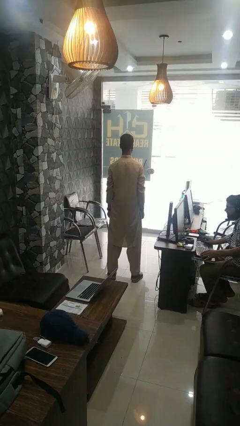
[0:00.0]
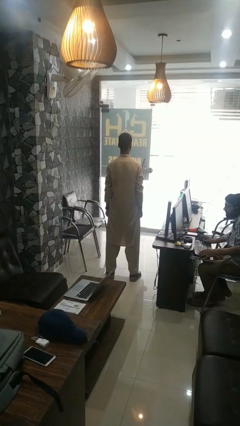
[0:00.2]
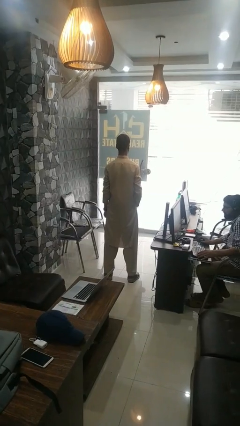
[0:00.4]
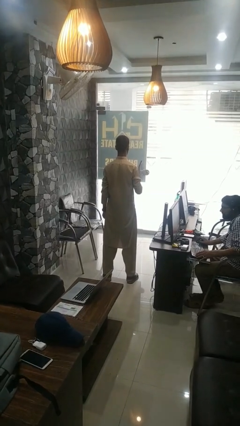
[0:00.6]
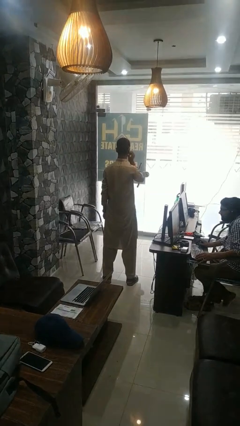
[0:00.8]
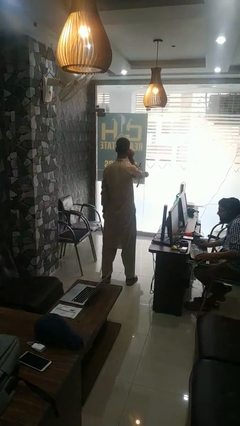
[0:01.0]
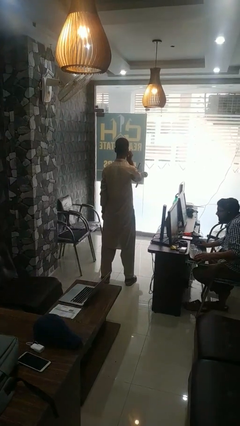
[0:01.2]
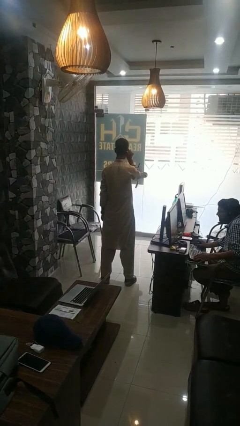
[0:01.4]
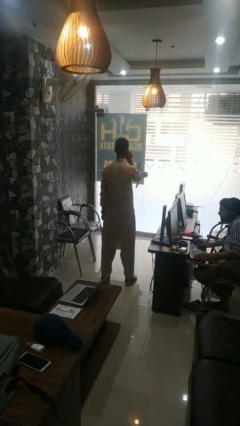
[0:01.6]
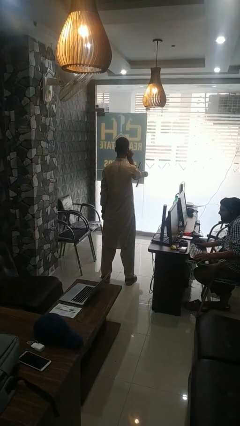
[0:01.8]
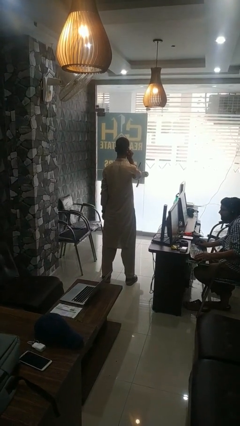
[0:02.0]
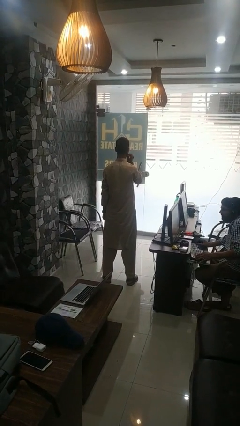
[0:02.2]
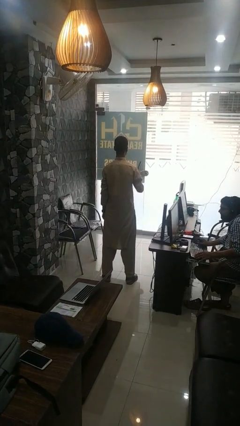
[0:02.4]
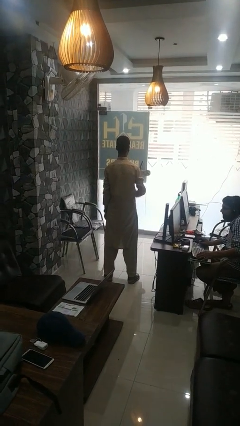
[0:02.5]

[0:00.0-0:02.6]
person touches earlobe

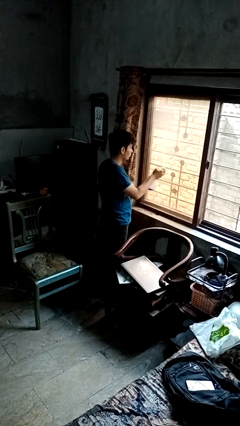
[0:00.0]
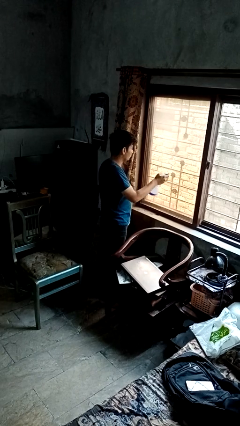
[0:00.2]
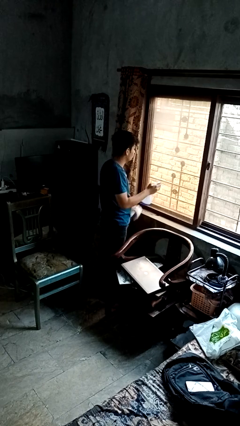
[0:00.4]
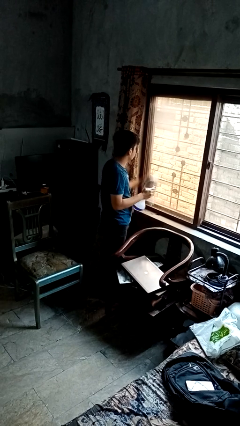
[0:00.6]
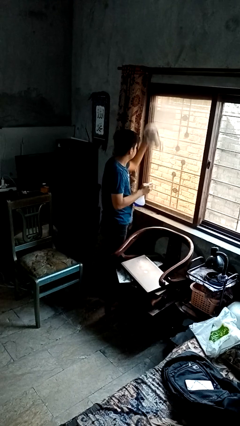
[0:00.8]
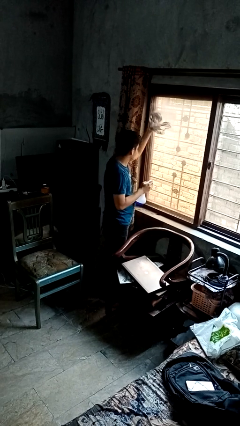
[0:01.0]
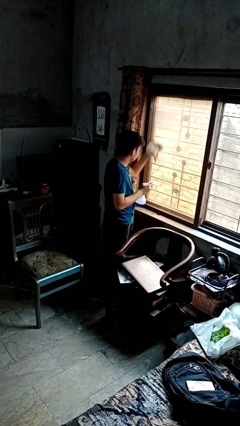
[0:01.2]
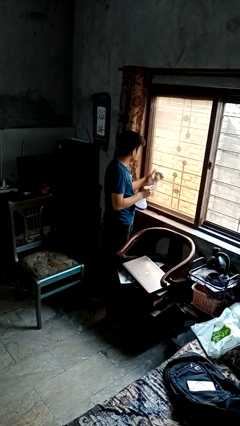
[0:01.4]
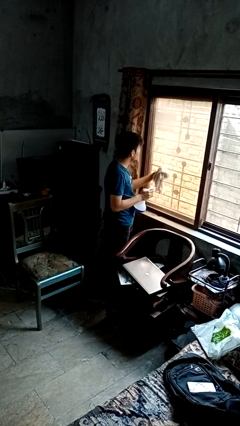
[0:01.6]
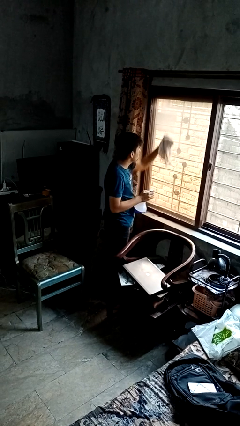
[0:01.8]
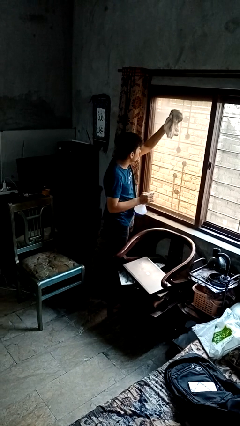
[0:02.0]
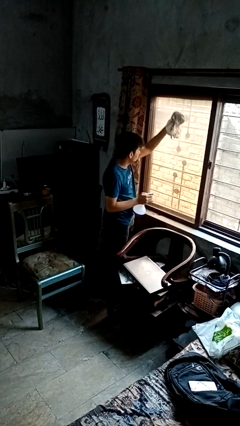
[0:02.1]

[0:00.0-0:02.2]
person washes window

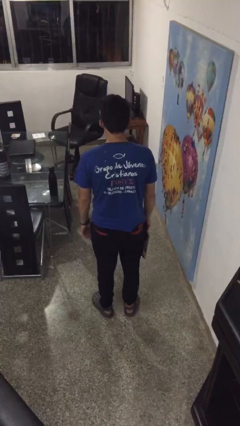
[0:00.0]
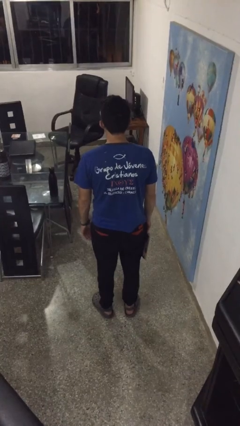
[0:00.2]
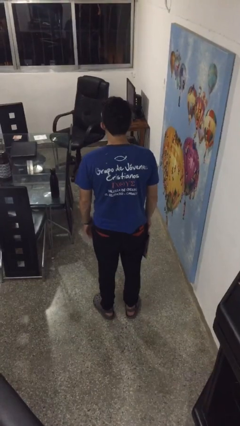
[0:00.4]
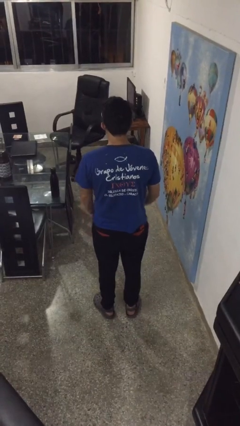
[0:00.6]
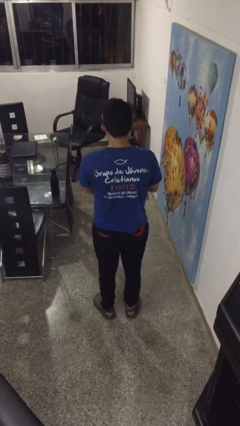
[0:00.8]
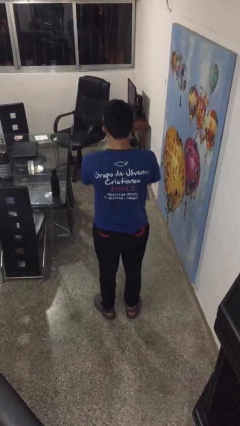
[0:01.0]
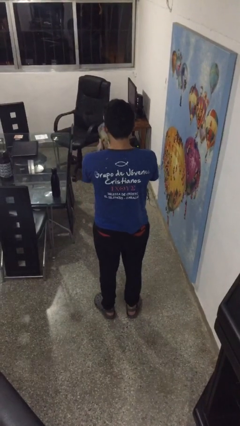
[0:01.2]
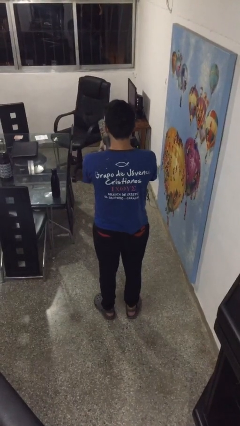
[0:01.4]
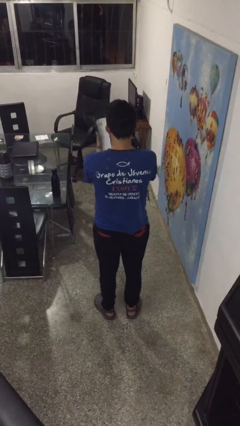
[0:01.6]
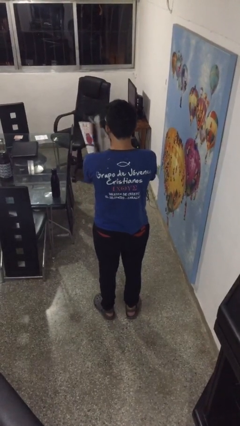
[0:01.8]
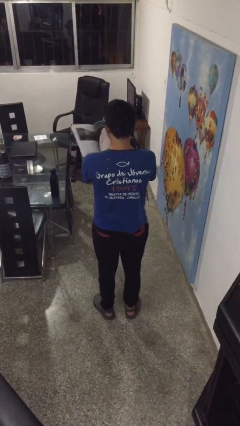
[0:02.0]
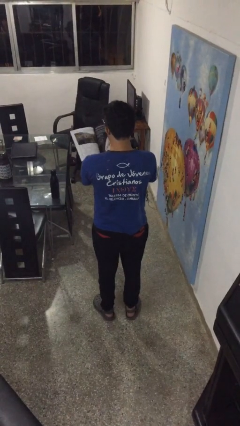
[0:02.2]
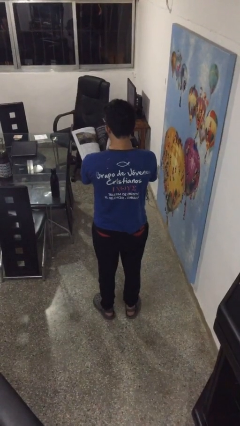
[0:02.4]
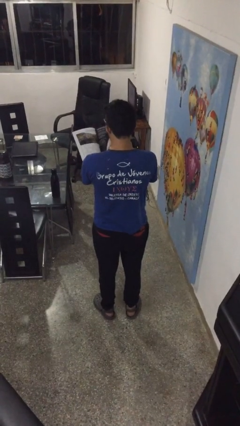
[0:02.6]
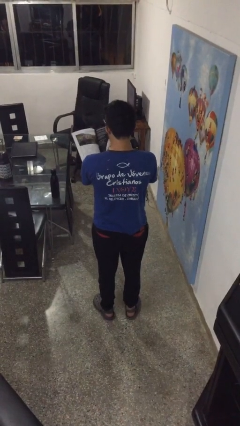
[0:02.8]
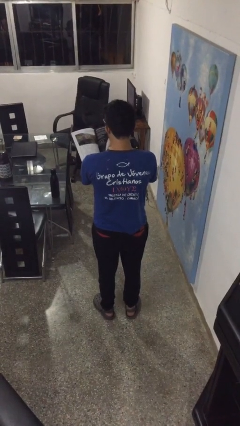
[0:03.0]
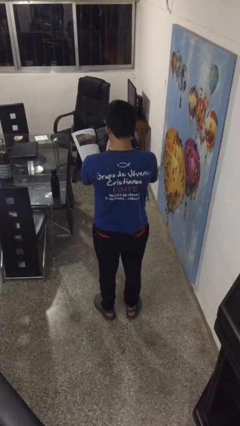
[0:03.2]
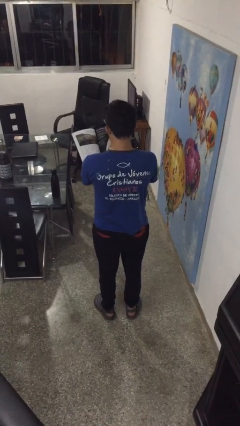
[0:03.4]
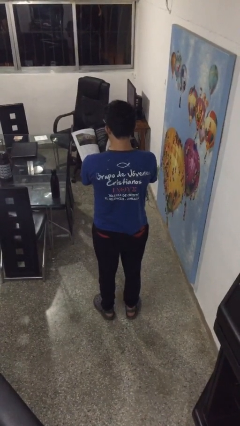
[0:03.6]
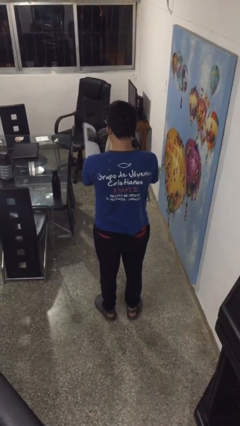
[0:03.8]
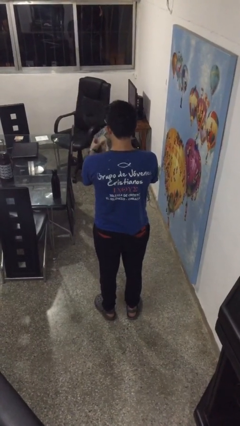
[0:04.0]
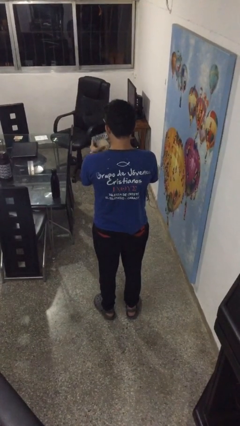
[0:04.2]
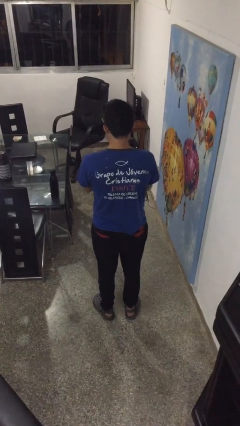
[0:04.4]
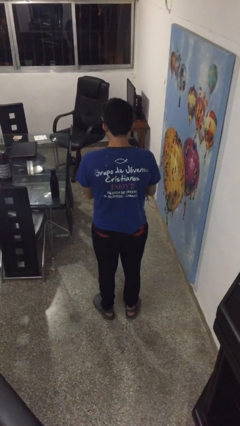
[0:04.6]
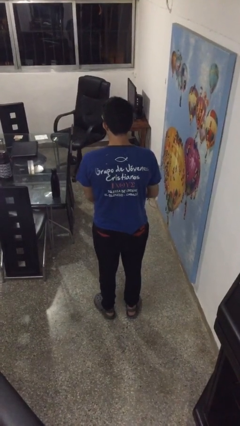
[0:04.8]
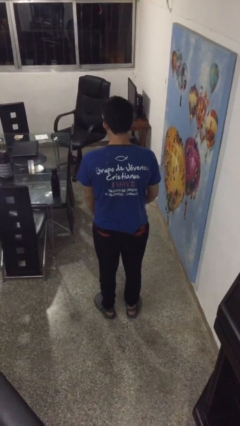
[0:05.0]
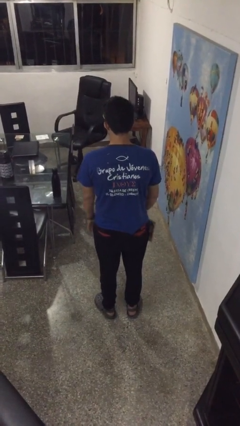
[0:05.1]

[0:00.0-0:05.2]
person reads magazine

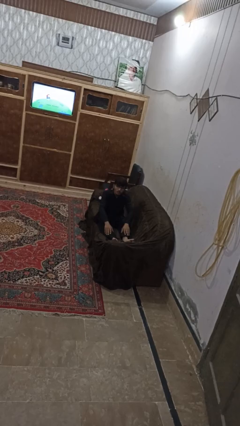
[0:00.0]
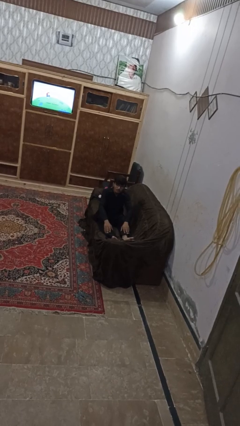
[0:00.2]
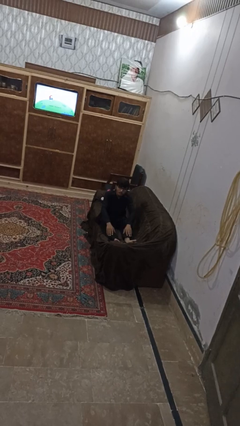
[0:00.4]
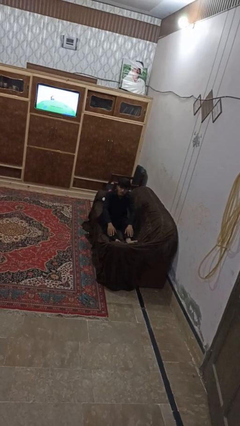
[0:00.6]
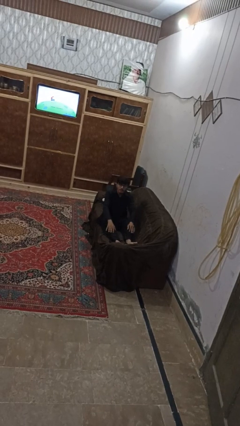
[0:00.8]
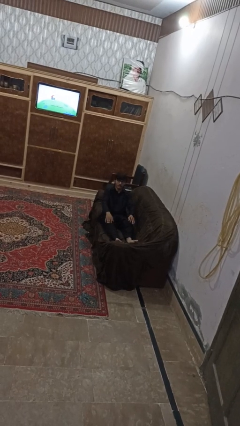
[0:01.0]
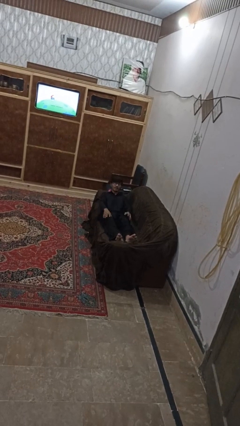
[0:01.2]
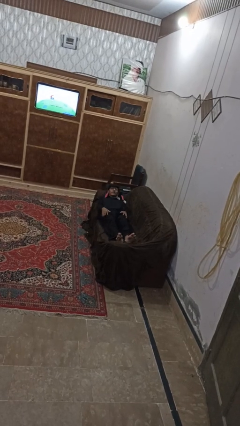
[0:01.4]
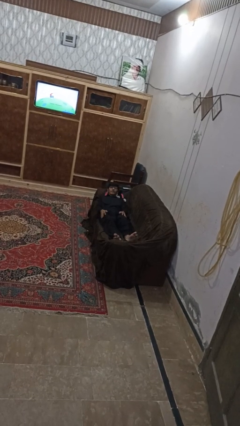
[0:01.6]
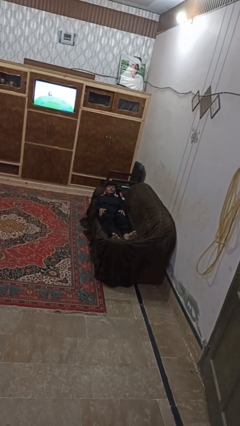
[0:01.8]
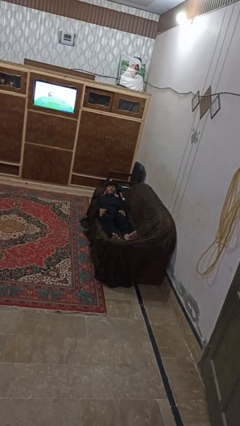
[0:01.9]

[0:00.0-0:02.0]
person lies down on couch

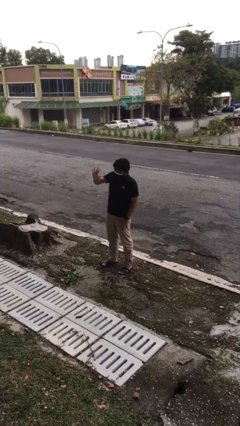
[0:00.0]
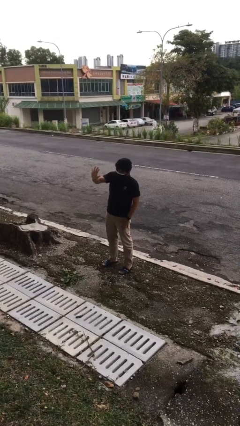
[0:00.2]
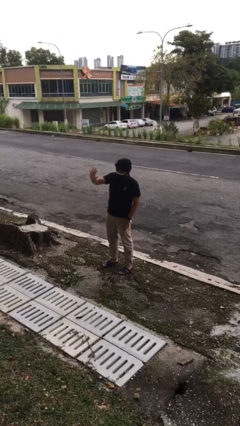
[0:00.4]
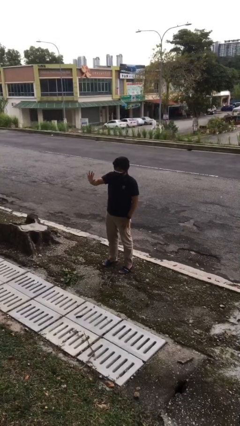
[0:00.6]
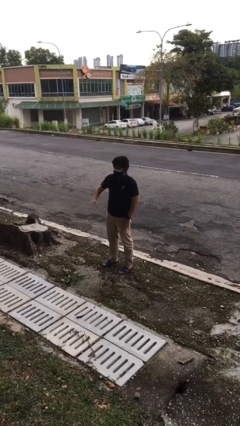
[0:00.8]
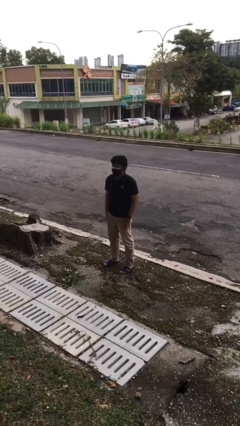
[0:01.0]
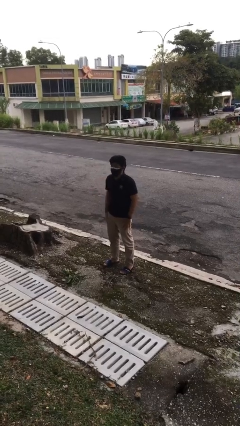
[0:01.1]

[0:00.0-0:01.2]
person gestures number five

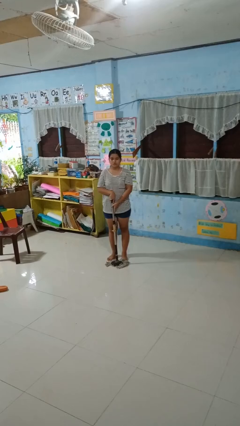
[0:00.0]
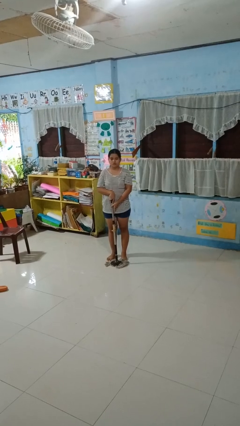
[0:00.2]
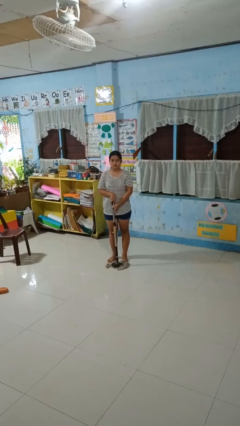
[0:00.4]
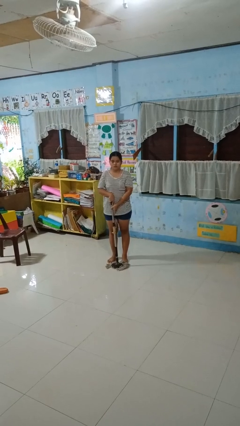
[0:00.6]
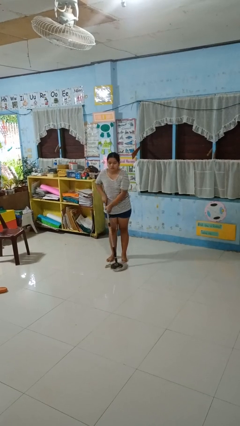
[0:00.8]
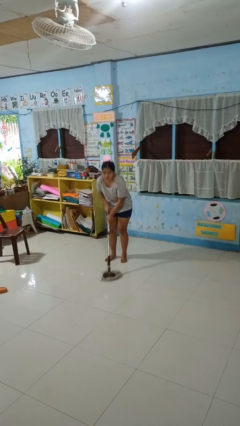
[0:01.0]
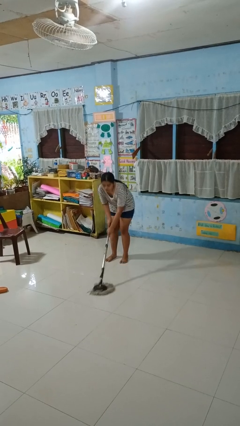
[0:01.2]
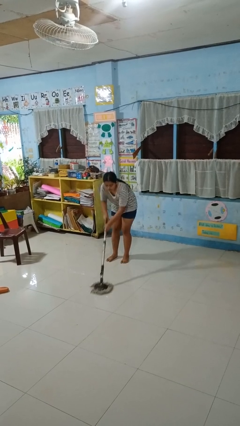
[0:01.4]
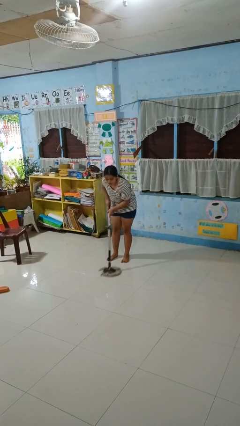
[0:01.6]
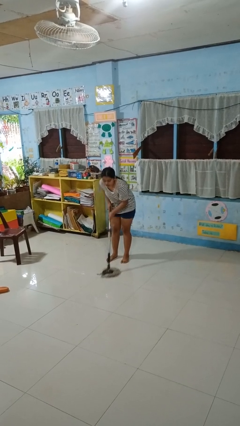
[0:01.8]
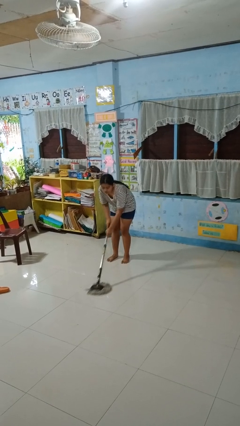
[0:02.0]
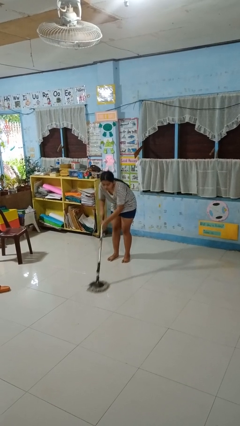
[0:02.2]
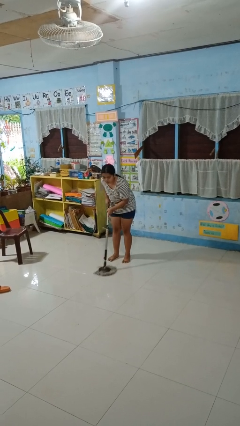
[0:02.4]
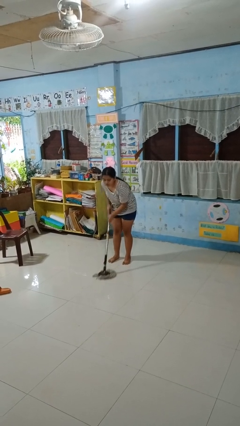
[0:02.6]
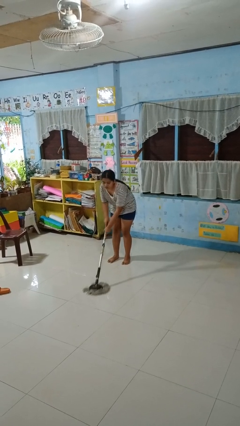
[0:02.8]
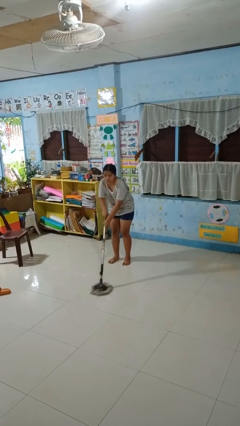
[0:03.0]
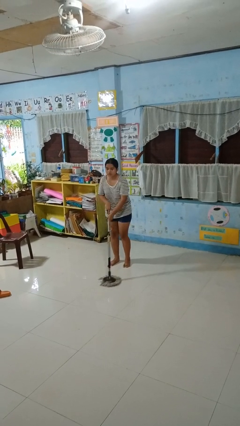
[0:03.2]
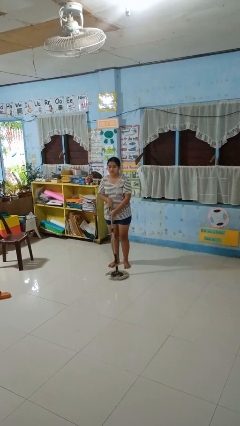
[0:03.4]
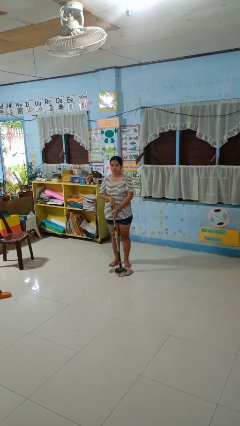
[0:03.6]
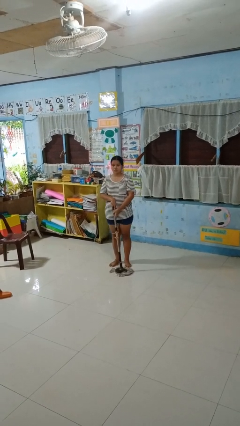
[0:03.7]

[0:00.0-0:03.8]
person mops

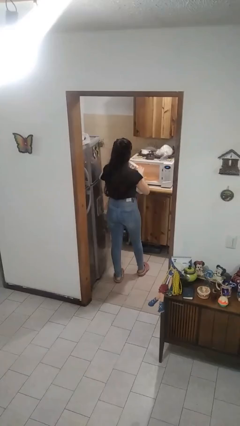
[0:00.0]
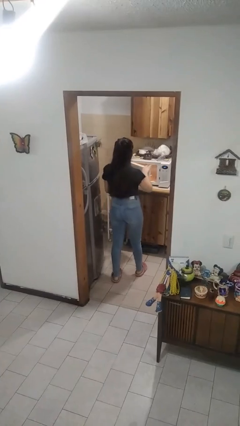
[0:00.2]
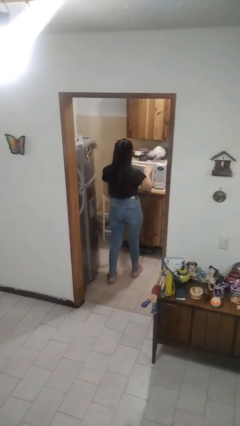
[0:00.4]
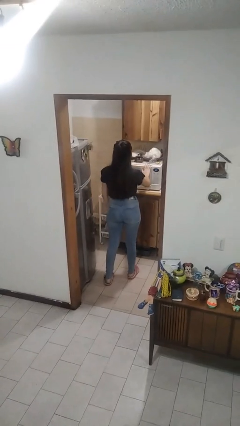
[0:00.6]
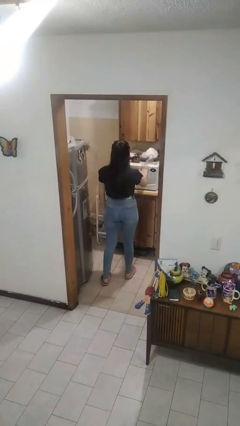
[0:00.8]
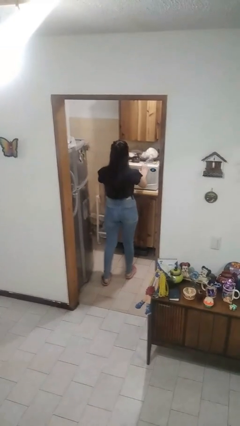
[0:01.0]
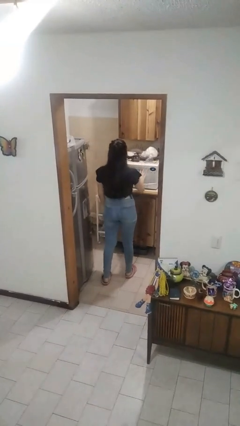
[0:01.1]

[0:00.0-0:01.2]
person closes microwave
